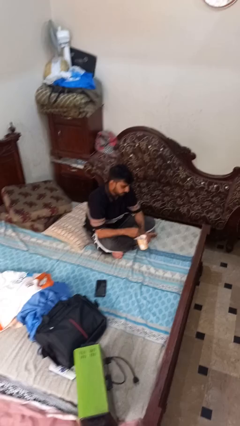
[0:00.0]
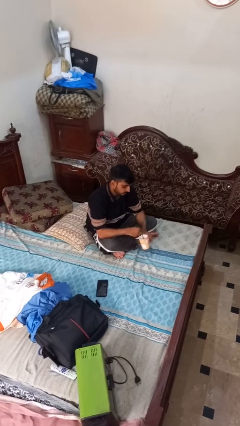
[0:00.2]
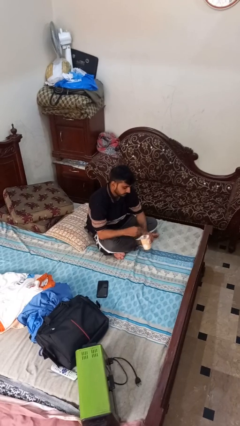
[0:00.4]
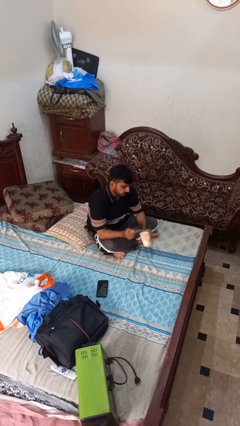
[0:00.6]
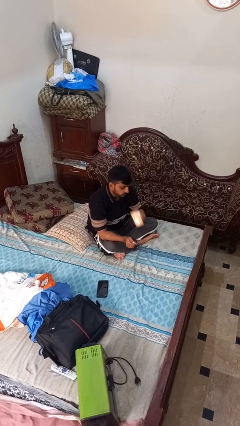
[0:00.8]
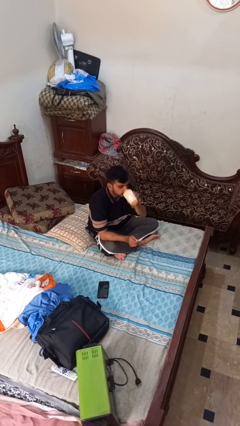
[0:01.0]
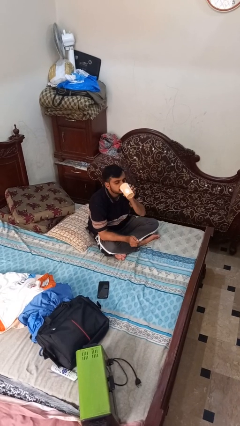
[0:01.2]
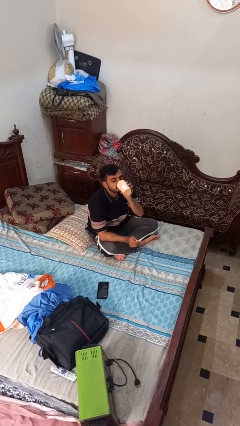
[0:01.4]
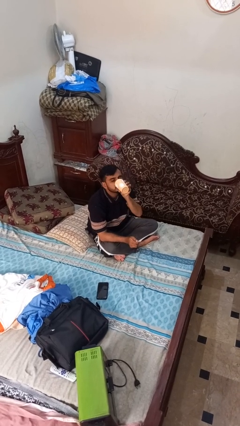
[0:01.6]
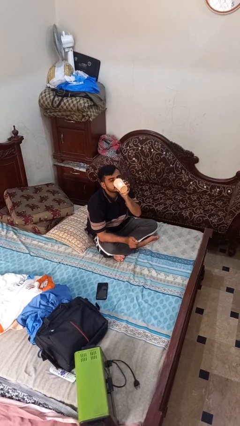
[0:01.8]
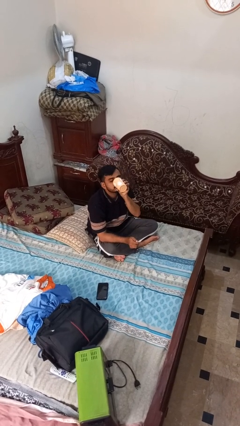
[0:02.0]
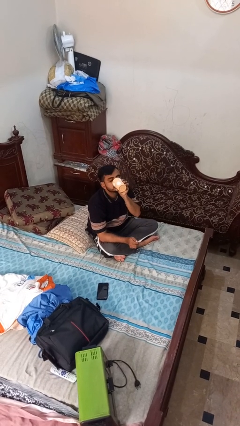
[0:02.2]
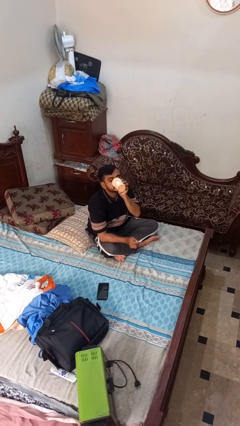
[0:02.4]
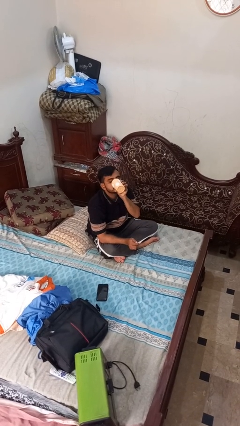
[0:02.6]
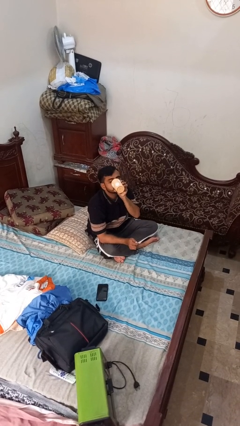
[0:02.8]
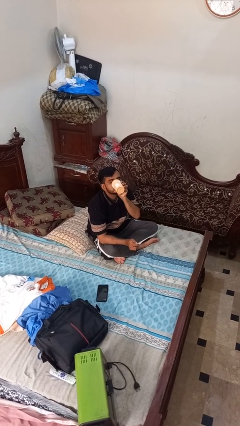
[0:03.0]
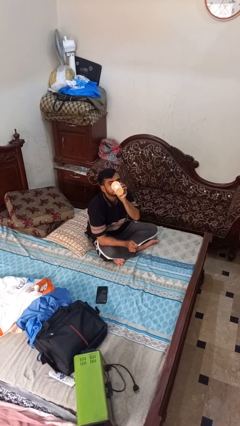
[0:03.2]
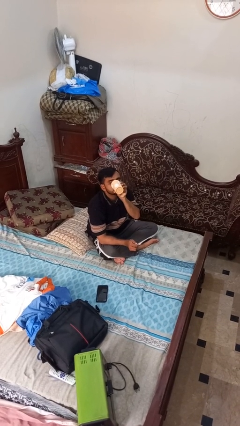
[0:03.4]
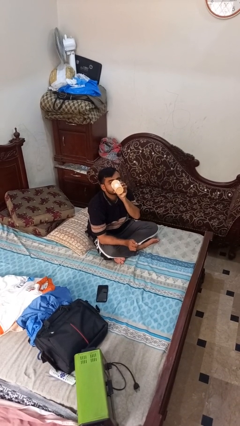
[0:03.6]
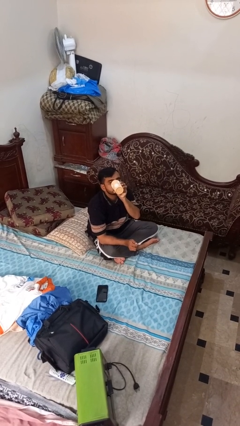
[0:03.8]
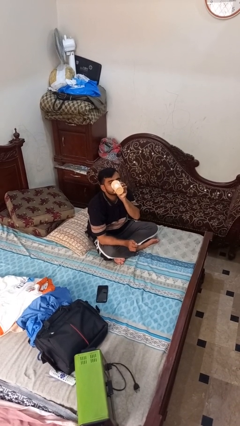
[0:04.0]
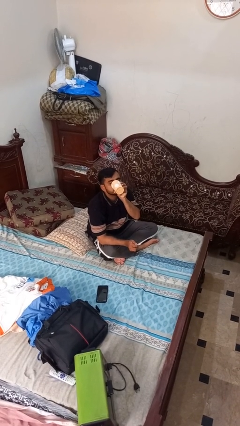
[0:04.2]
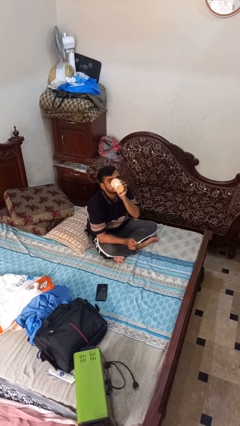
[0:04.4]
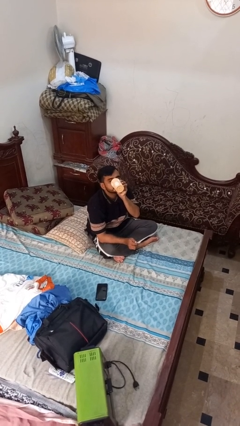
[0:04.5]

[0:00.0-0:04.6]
person drinks from mug

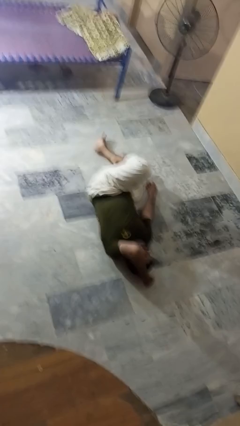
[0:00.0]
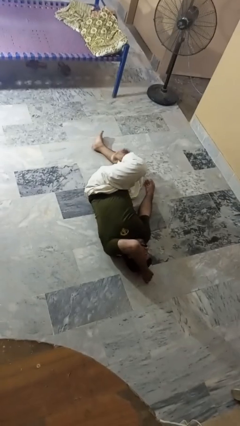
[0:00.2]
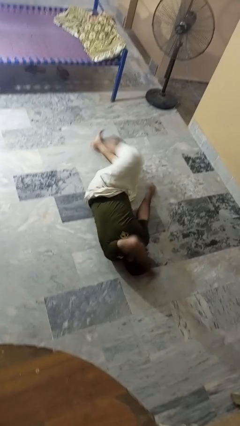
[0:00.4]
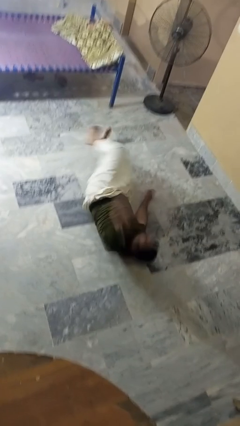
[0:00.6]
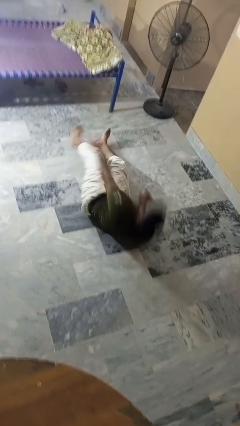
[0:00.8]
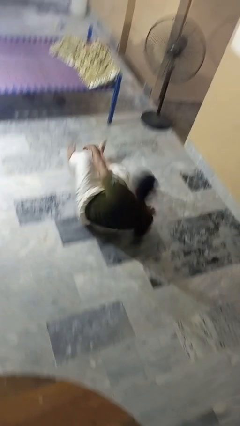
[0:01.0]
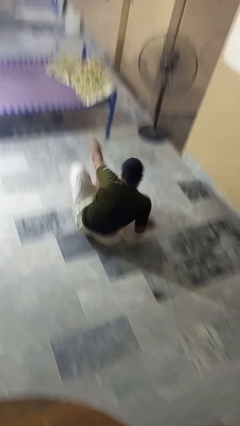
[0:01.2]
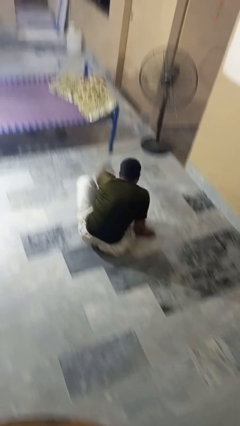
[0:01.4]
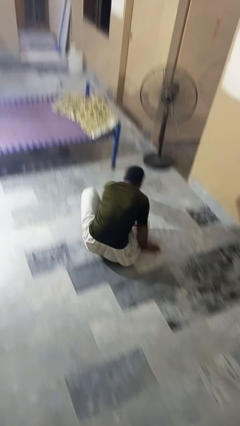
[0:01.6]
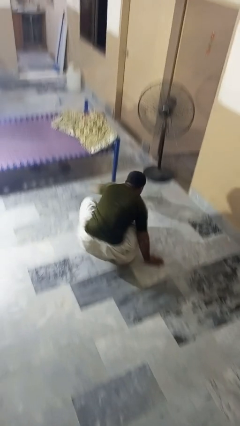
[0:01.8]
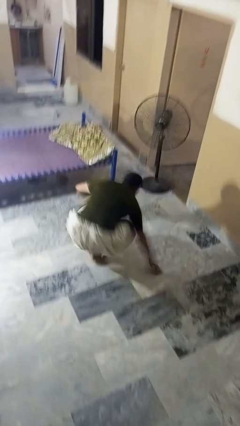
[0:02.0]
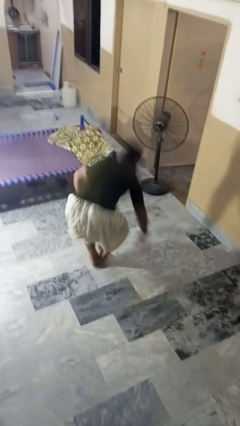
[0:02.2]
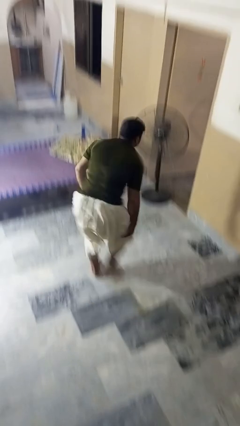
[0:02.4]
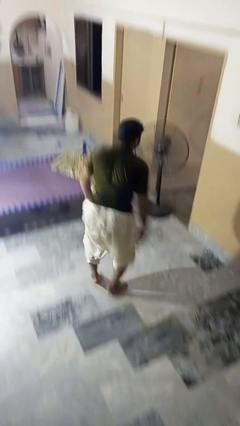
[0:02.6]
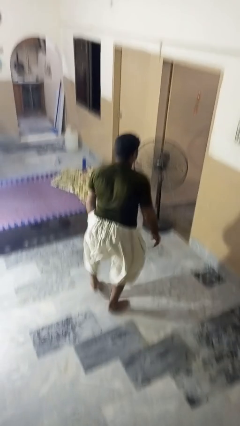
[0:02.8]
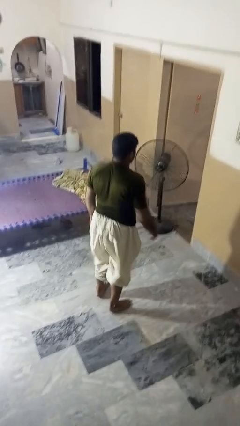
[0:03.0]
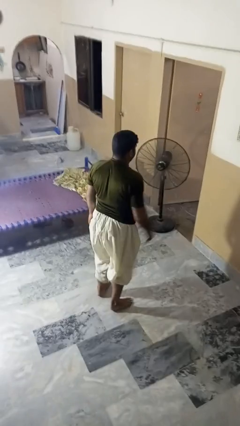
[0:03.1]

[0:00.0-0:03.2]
person stands up from floor

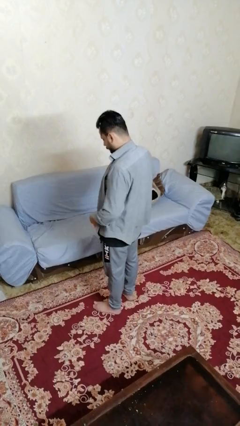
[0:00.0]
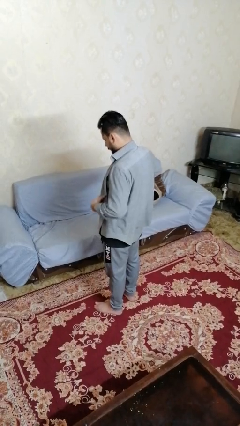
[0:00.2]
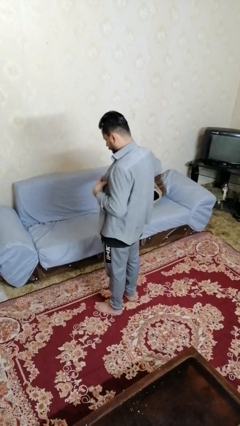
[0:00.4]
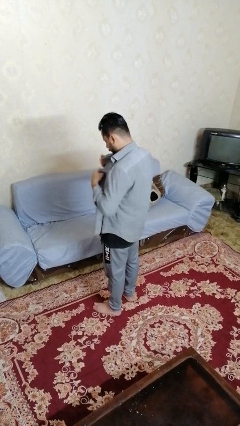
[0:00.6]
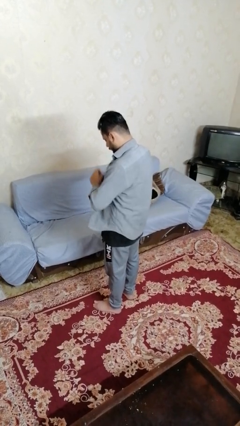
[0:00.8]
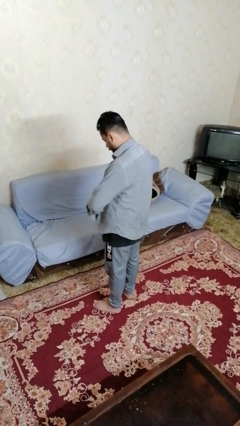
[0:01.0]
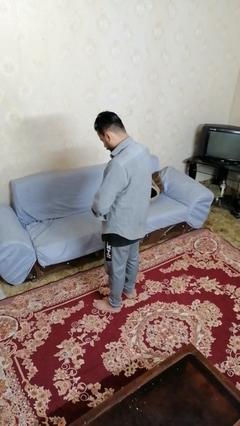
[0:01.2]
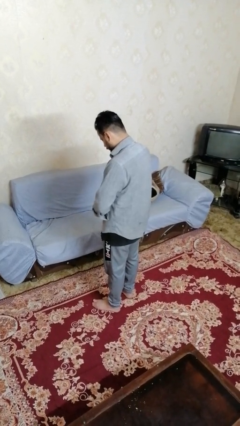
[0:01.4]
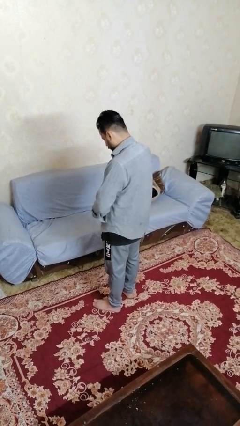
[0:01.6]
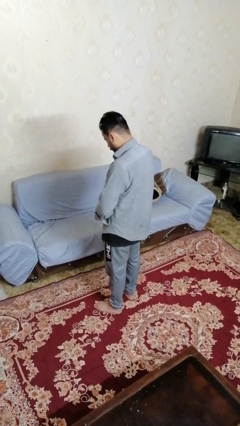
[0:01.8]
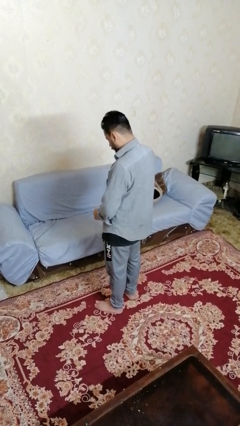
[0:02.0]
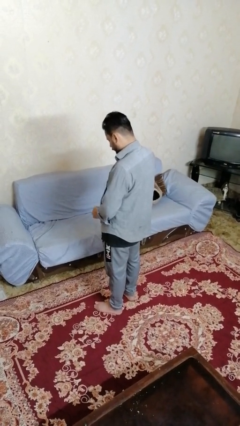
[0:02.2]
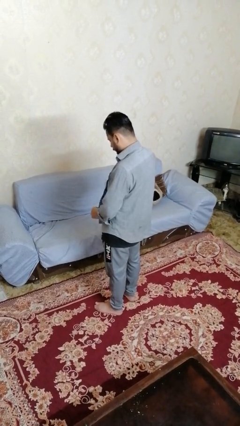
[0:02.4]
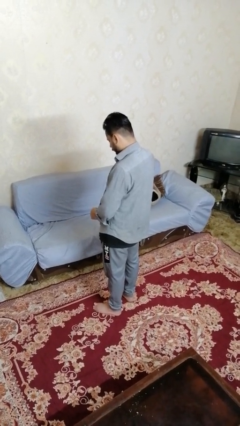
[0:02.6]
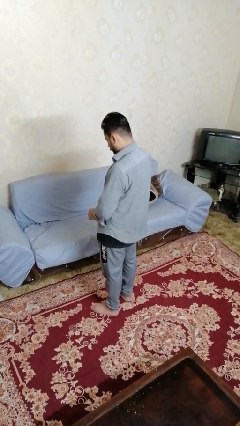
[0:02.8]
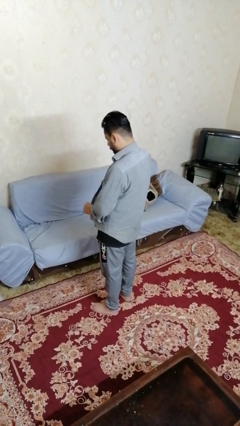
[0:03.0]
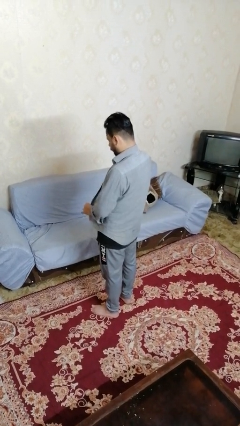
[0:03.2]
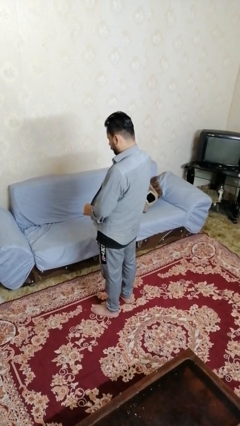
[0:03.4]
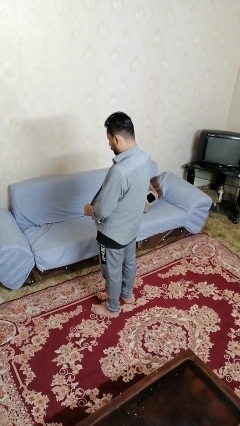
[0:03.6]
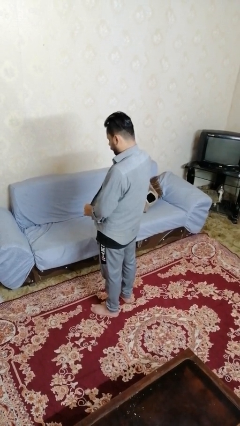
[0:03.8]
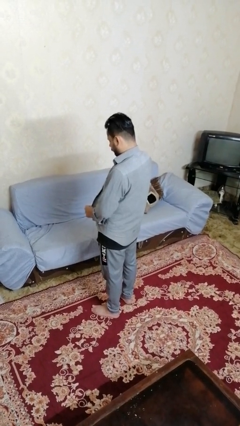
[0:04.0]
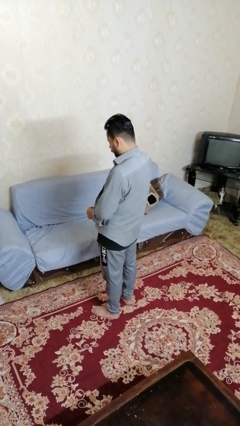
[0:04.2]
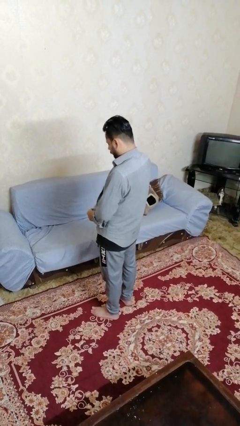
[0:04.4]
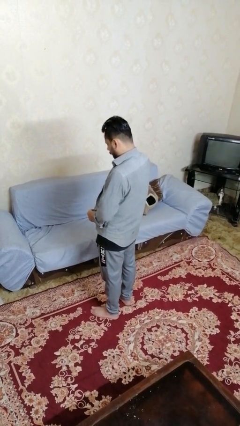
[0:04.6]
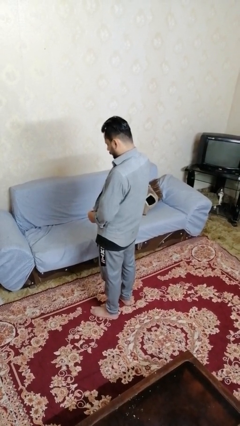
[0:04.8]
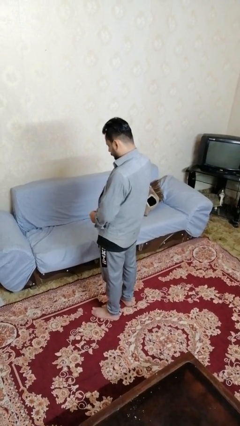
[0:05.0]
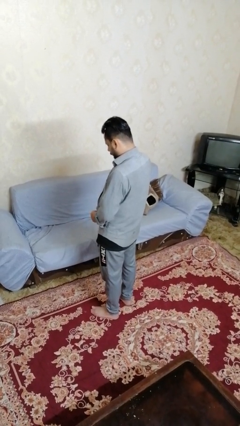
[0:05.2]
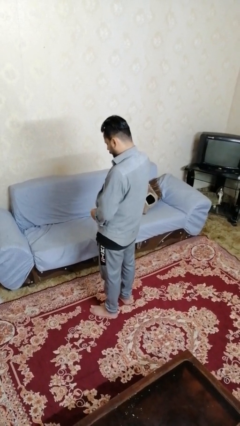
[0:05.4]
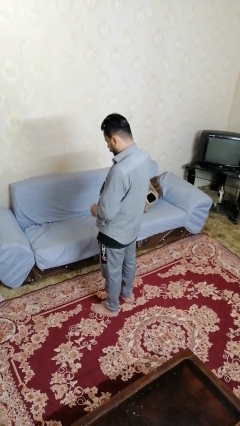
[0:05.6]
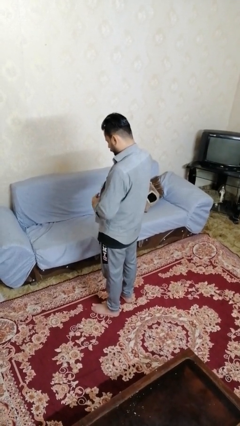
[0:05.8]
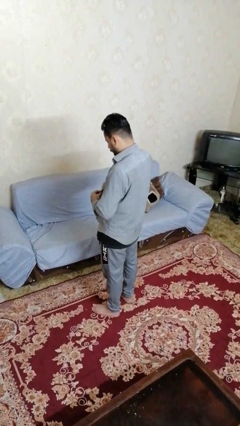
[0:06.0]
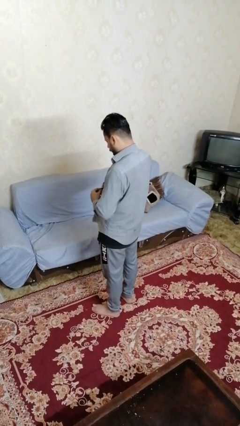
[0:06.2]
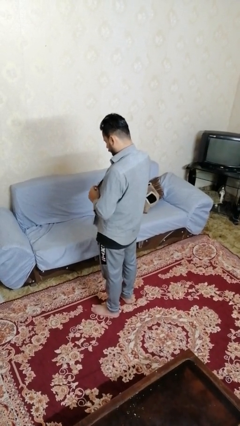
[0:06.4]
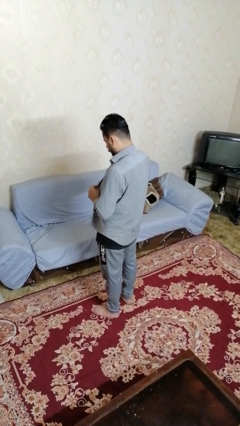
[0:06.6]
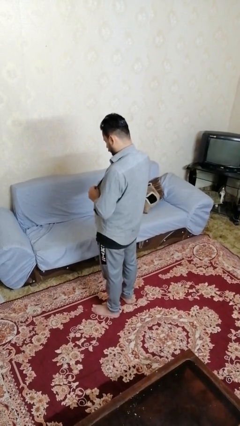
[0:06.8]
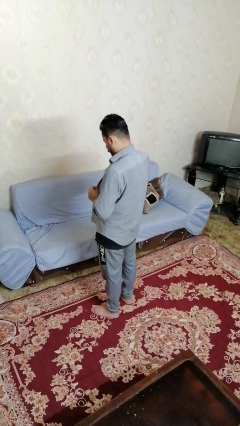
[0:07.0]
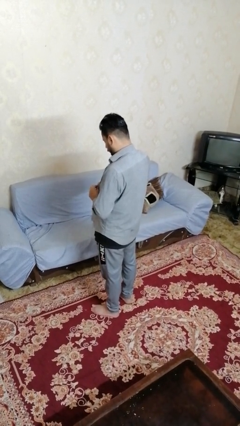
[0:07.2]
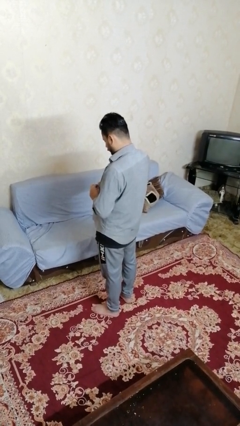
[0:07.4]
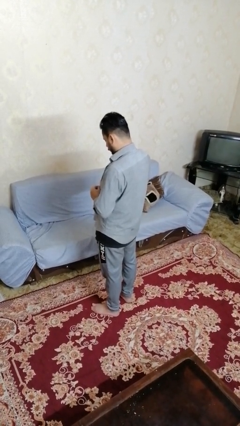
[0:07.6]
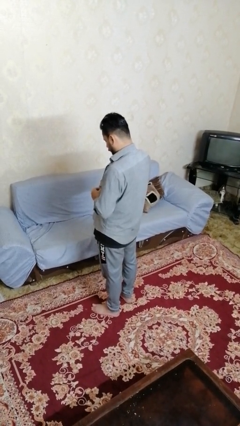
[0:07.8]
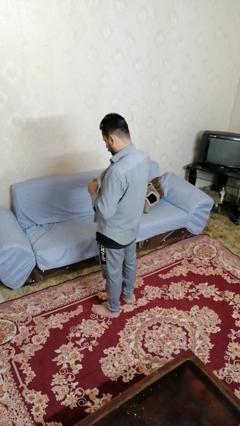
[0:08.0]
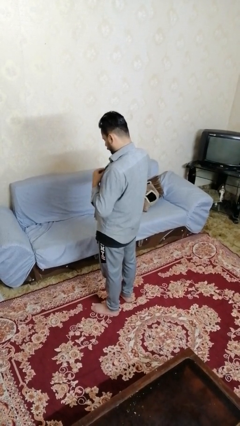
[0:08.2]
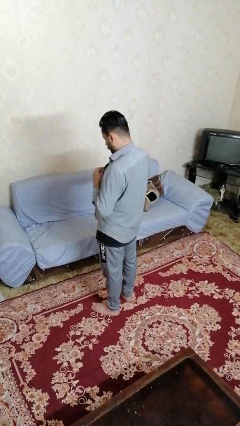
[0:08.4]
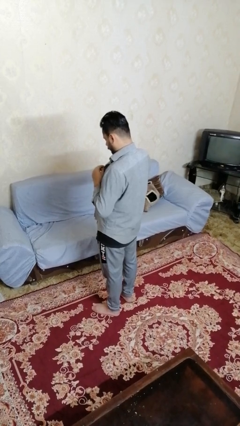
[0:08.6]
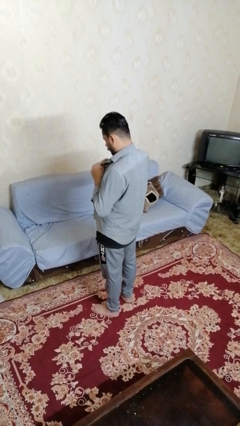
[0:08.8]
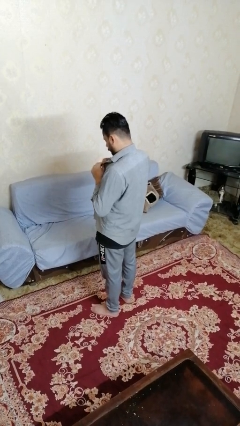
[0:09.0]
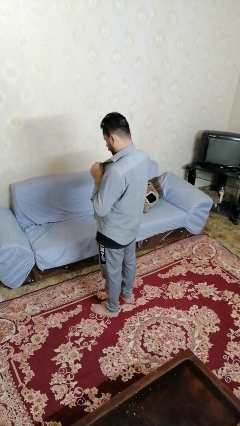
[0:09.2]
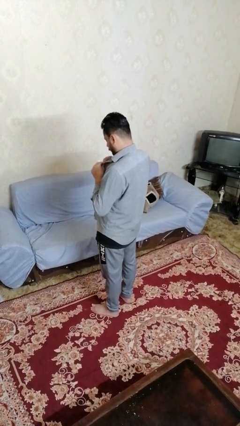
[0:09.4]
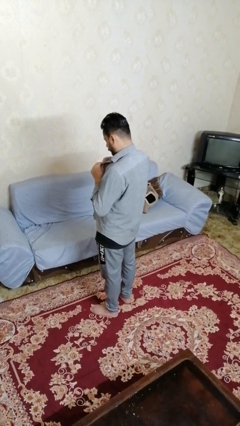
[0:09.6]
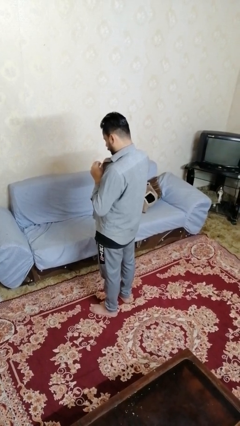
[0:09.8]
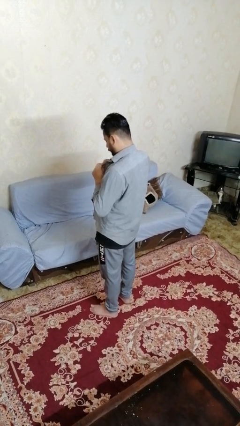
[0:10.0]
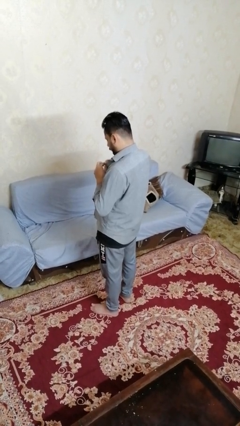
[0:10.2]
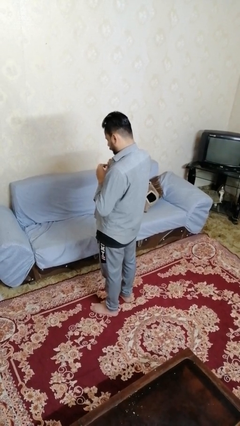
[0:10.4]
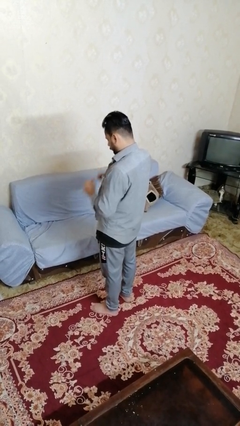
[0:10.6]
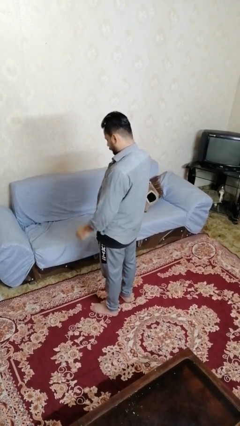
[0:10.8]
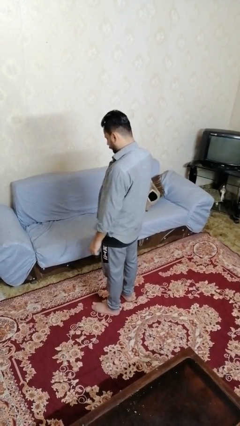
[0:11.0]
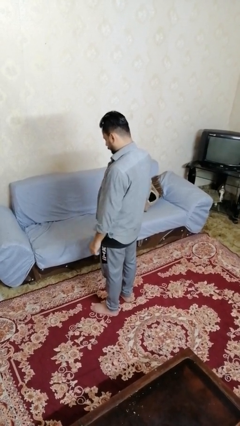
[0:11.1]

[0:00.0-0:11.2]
person buttons shirt
